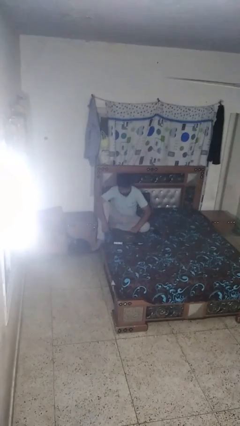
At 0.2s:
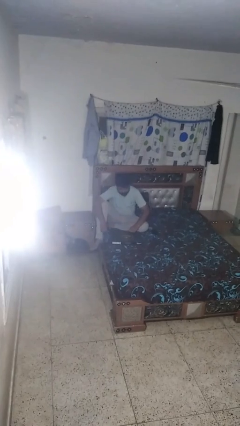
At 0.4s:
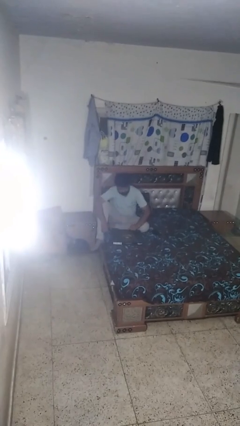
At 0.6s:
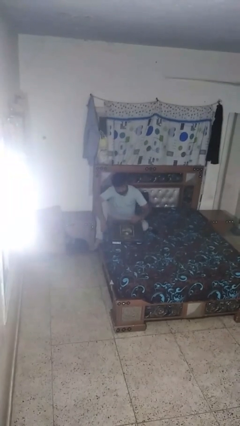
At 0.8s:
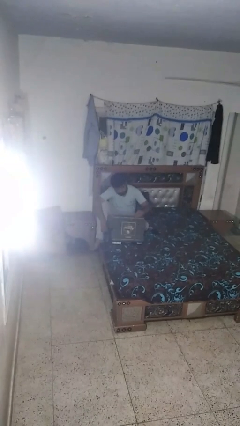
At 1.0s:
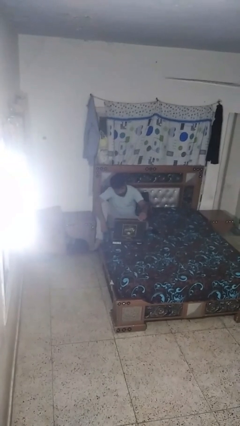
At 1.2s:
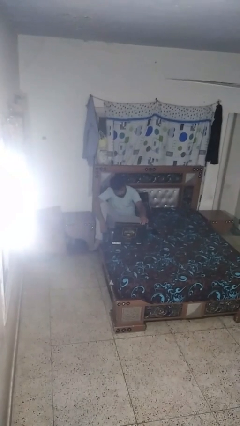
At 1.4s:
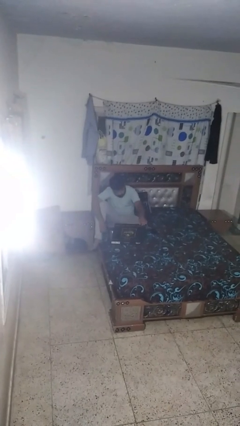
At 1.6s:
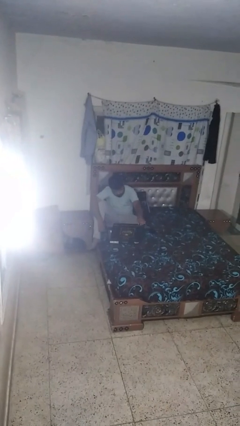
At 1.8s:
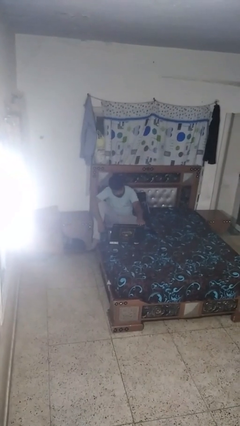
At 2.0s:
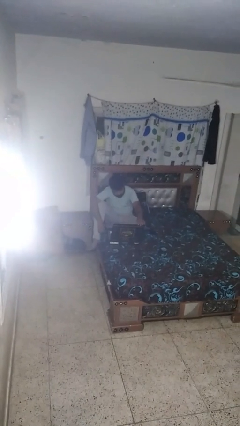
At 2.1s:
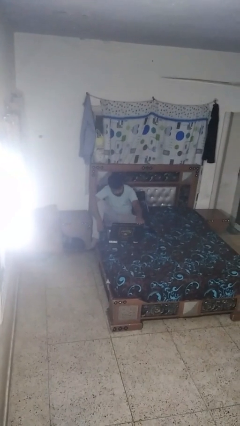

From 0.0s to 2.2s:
person opens laptop

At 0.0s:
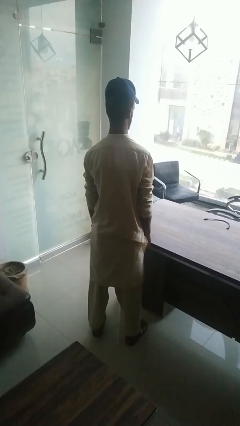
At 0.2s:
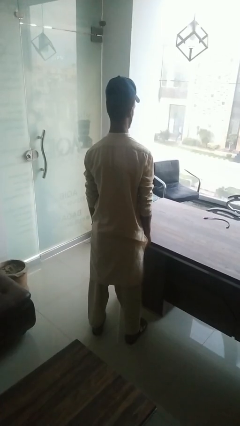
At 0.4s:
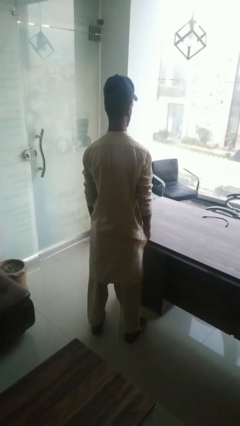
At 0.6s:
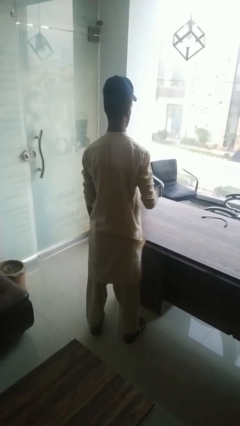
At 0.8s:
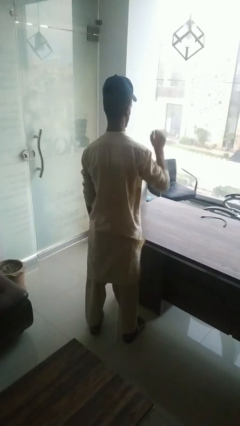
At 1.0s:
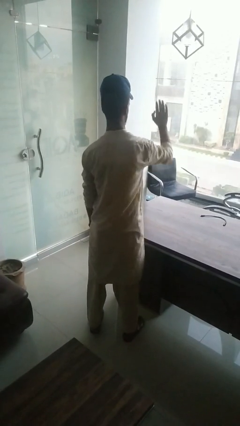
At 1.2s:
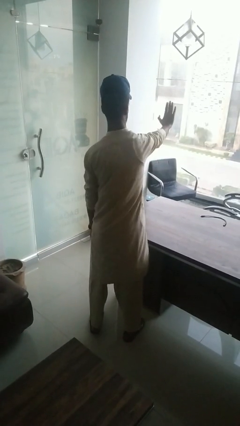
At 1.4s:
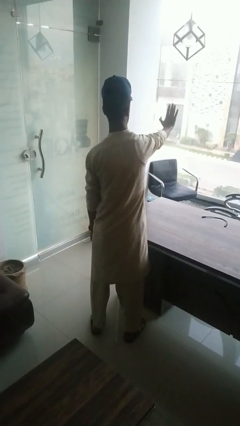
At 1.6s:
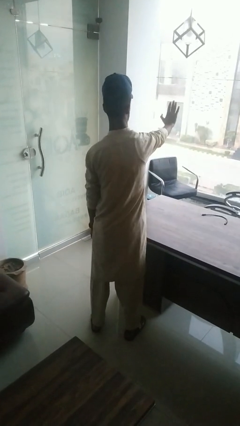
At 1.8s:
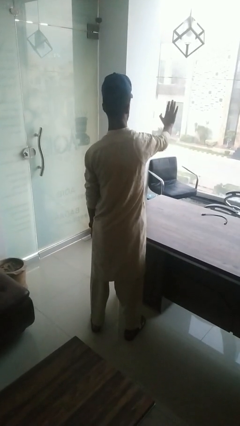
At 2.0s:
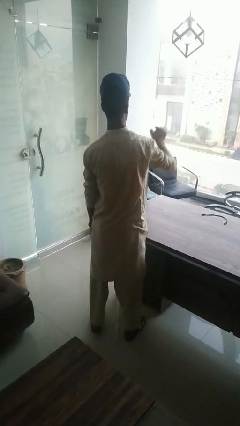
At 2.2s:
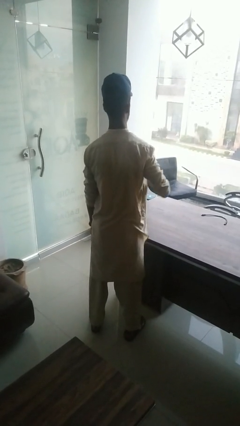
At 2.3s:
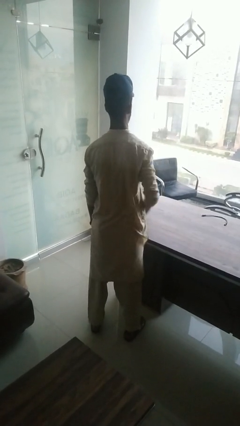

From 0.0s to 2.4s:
person gestures stop

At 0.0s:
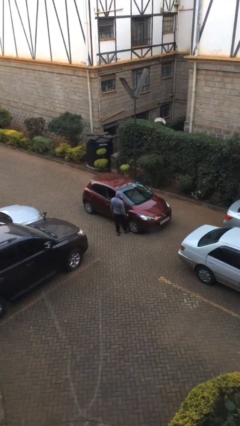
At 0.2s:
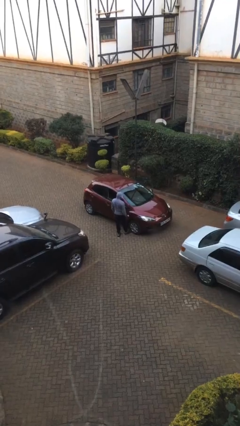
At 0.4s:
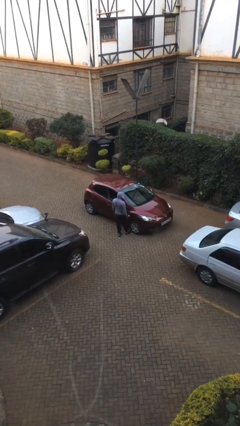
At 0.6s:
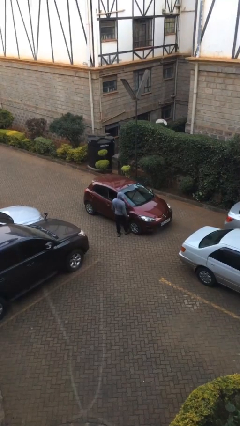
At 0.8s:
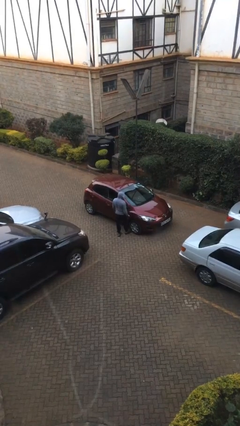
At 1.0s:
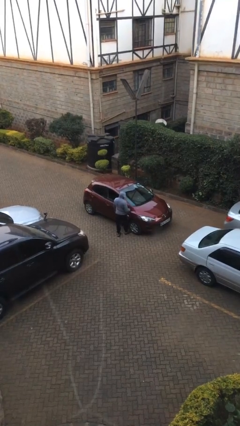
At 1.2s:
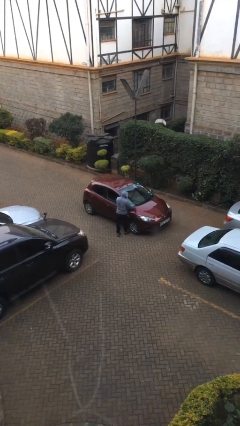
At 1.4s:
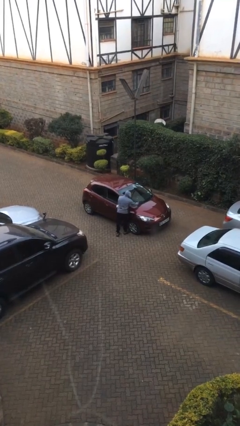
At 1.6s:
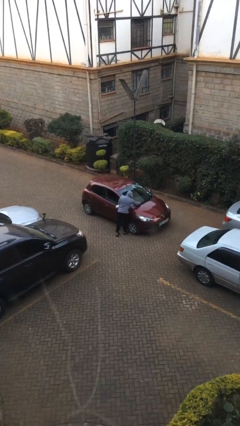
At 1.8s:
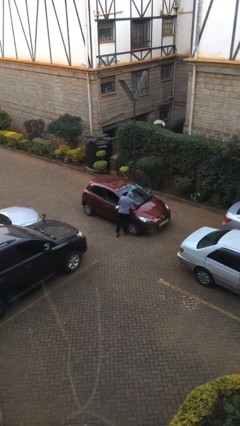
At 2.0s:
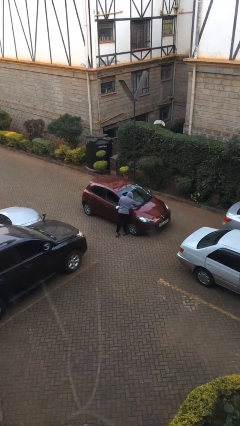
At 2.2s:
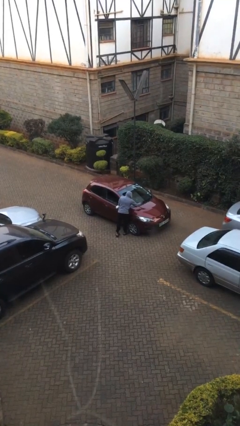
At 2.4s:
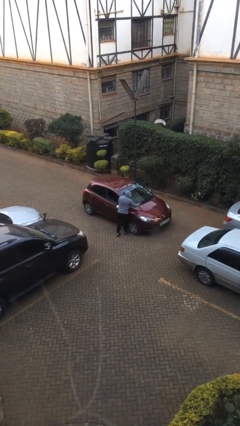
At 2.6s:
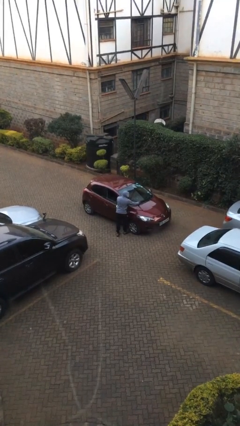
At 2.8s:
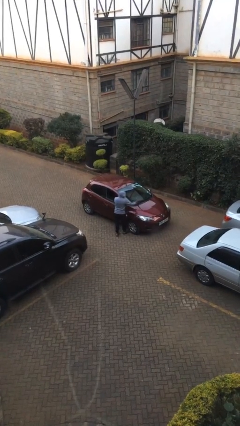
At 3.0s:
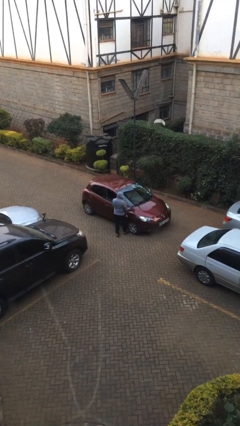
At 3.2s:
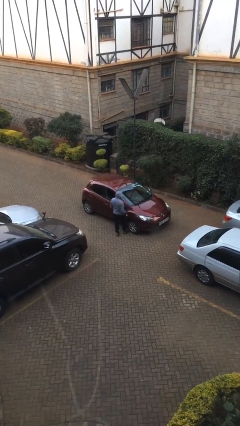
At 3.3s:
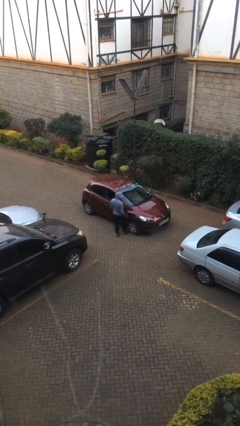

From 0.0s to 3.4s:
person flips up car wipers

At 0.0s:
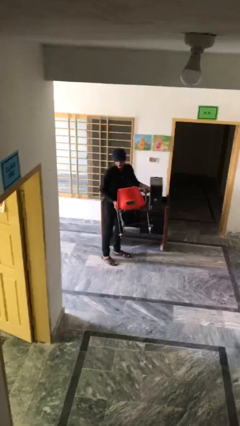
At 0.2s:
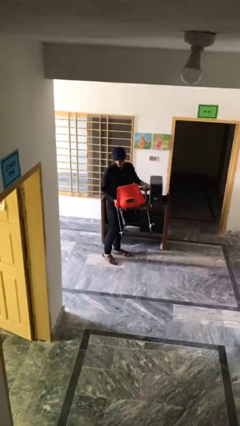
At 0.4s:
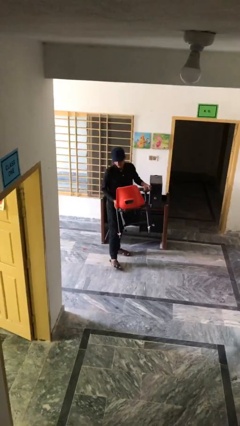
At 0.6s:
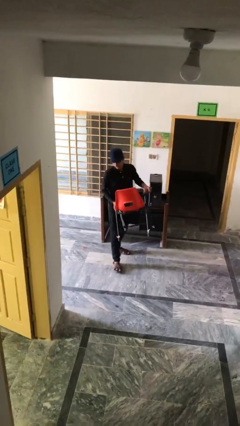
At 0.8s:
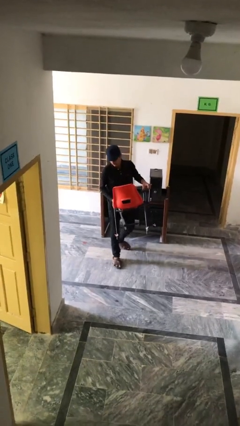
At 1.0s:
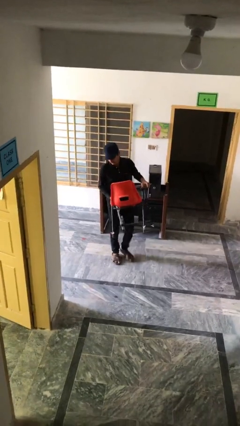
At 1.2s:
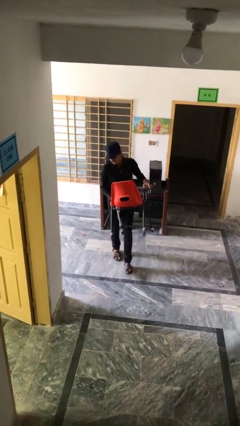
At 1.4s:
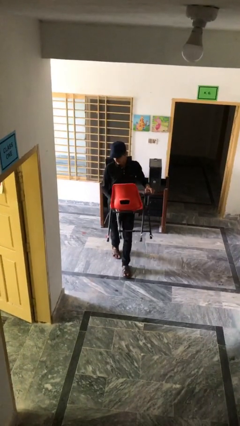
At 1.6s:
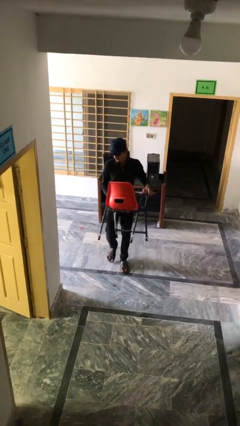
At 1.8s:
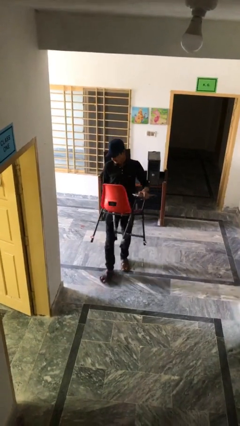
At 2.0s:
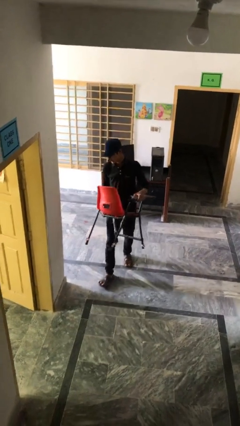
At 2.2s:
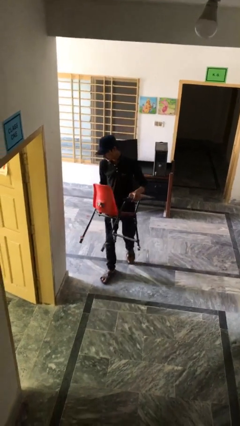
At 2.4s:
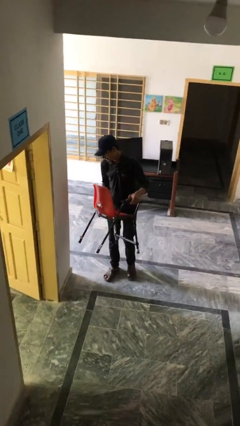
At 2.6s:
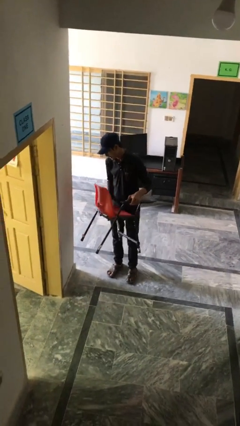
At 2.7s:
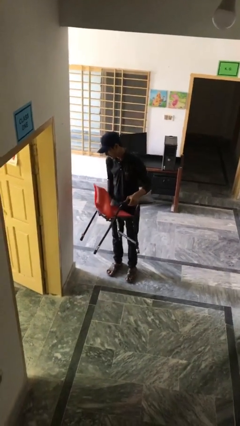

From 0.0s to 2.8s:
person carries heavy object

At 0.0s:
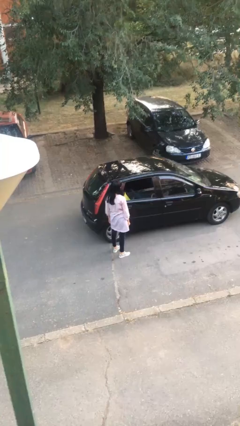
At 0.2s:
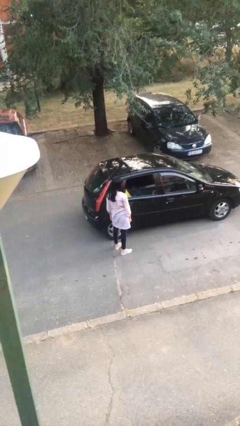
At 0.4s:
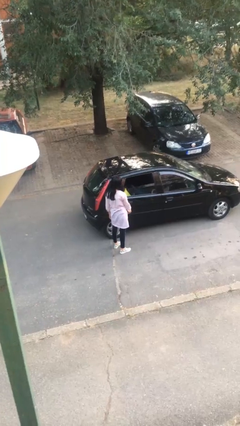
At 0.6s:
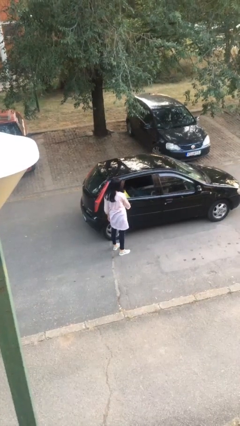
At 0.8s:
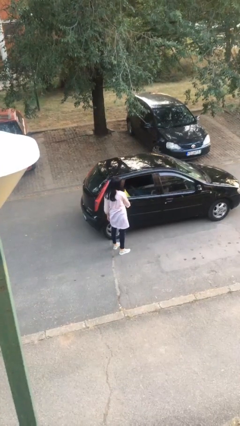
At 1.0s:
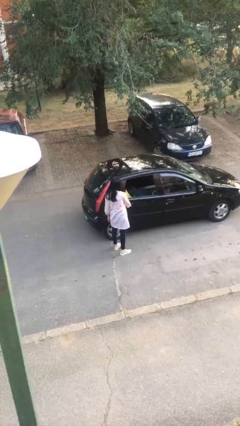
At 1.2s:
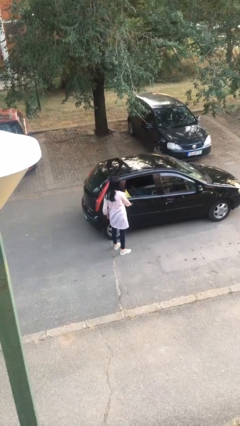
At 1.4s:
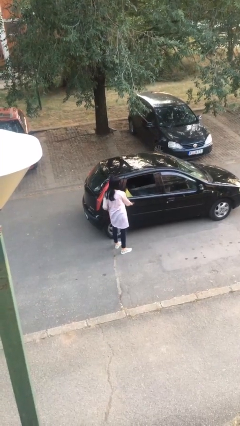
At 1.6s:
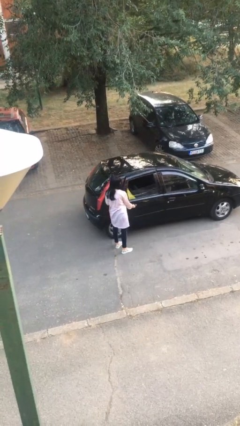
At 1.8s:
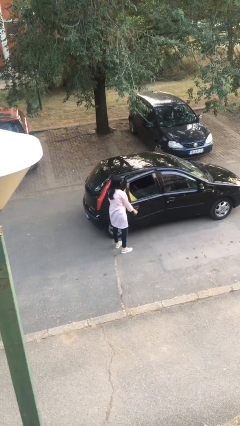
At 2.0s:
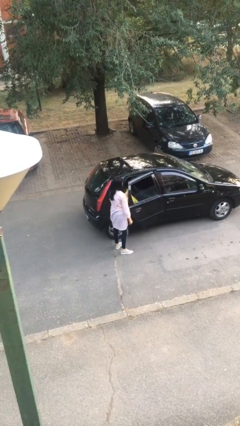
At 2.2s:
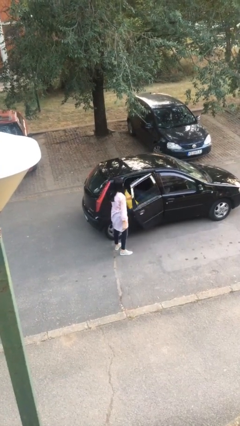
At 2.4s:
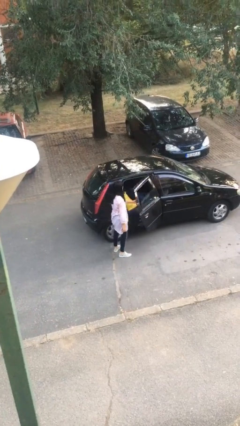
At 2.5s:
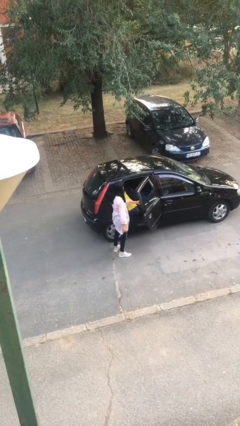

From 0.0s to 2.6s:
person opens car door

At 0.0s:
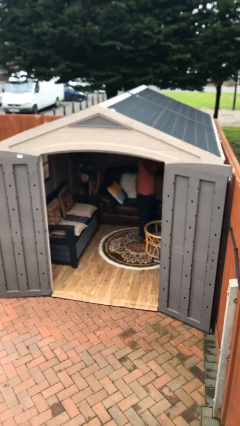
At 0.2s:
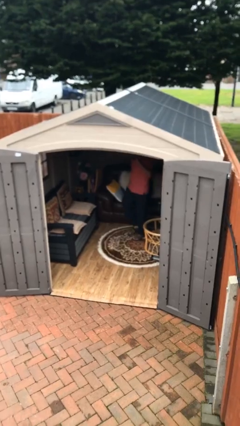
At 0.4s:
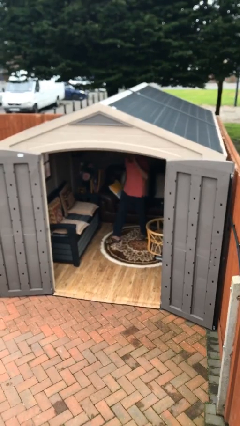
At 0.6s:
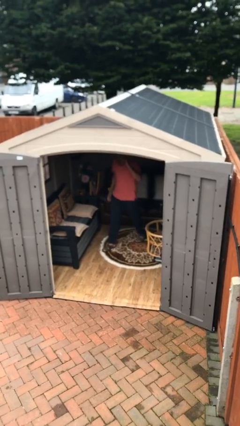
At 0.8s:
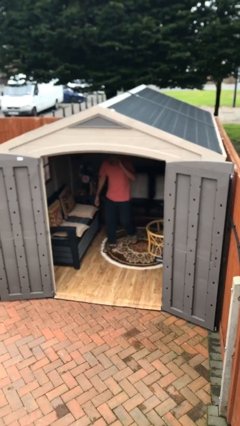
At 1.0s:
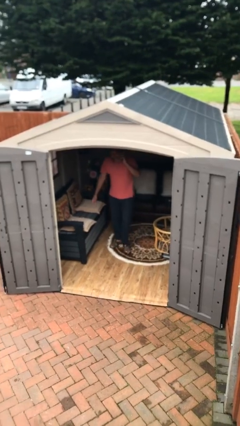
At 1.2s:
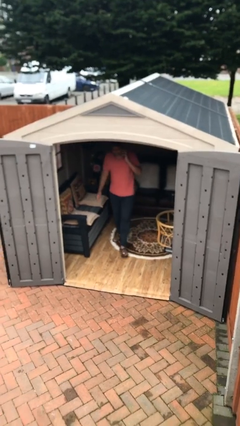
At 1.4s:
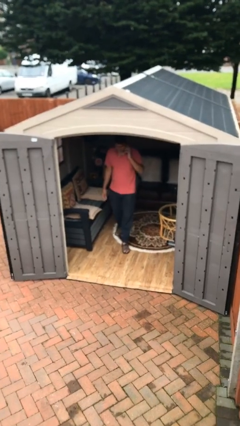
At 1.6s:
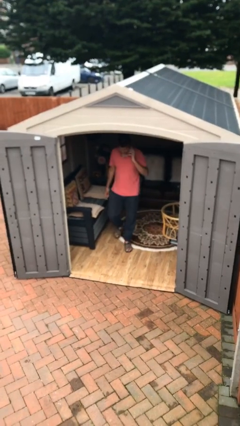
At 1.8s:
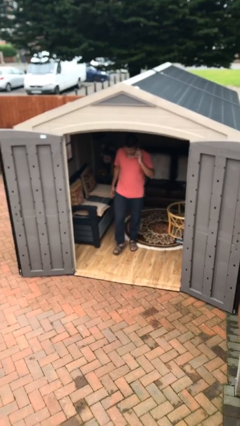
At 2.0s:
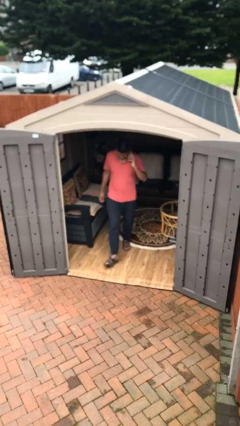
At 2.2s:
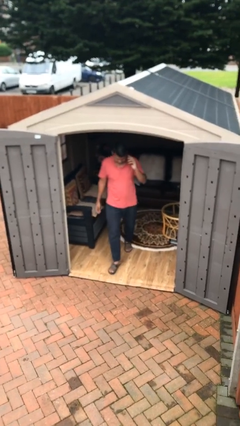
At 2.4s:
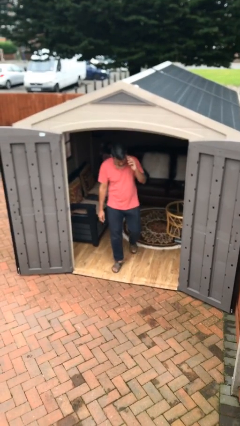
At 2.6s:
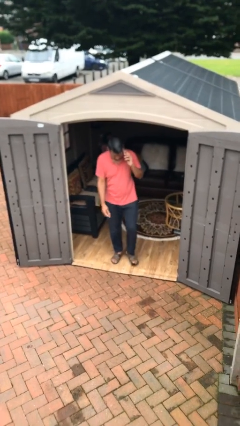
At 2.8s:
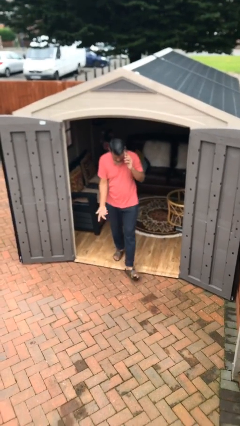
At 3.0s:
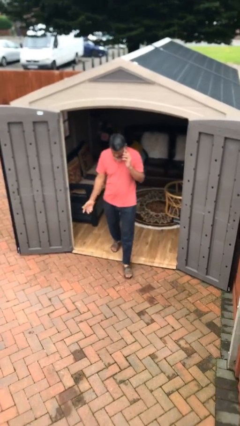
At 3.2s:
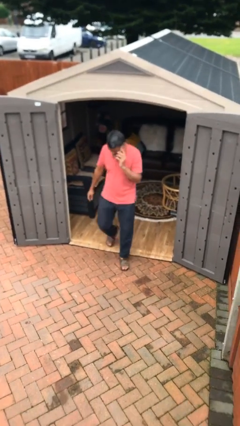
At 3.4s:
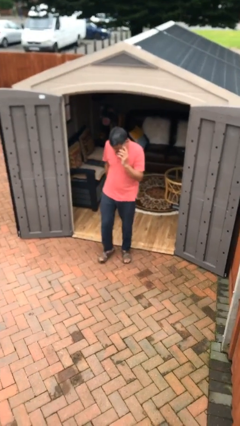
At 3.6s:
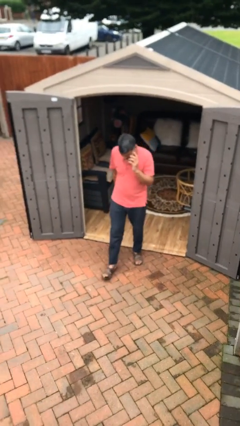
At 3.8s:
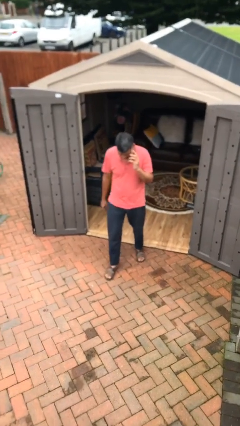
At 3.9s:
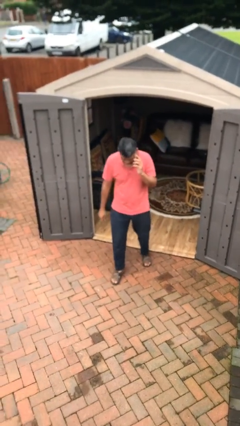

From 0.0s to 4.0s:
person enters scene through structure

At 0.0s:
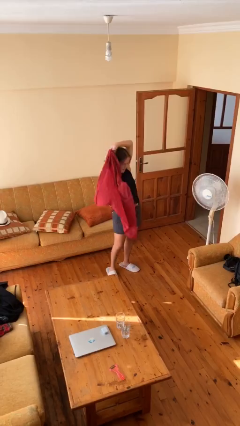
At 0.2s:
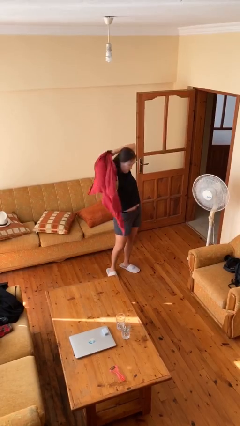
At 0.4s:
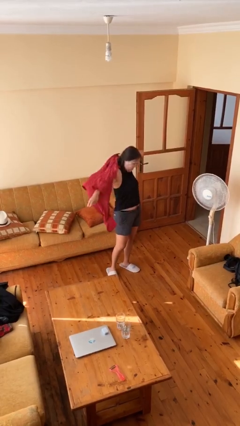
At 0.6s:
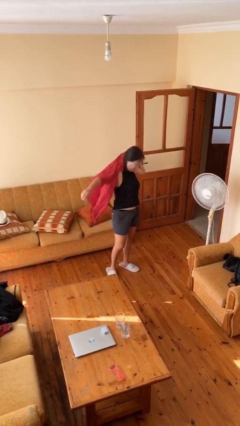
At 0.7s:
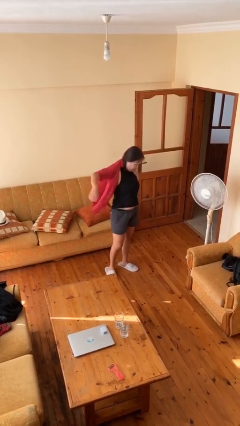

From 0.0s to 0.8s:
person takes off shirt
